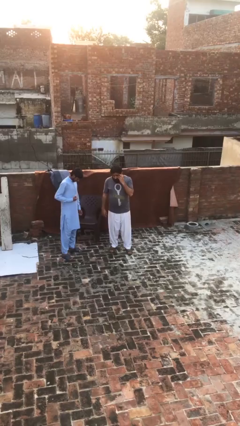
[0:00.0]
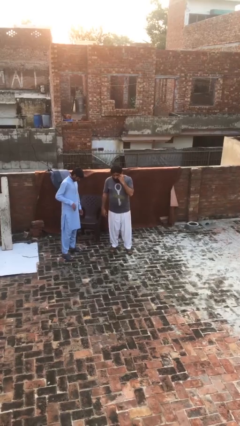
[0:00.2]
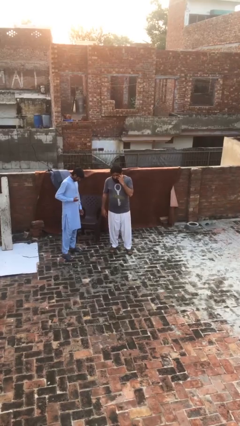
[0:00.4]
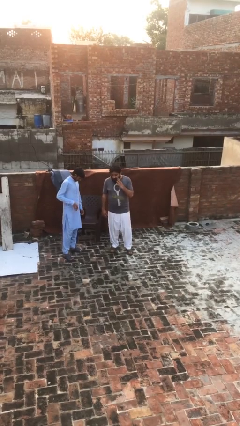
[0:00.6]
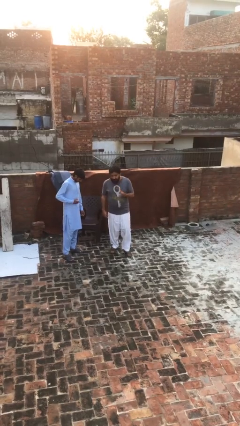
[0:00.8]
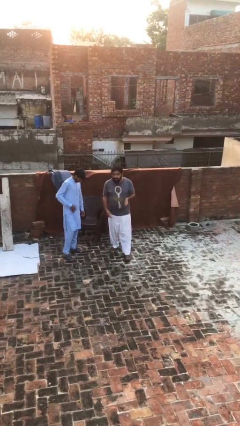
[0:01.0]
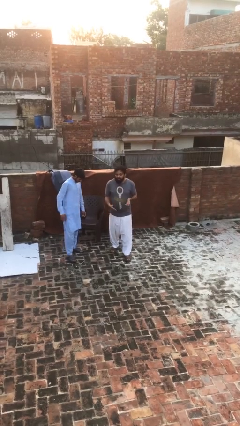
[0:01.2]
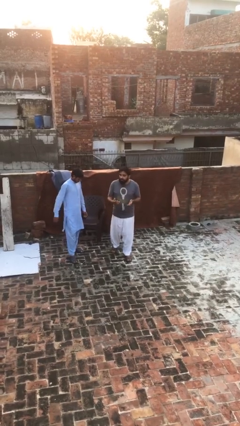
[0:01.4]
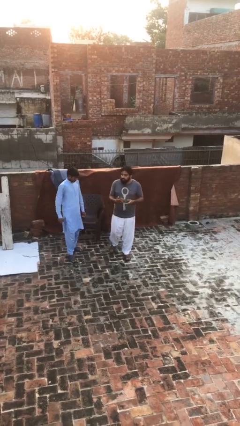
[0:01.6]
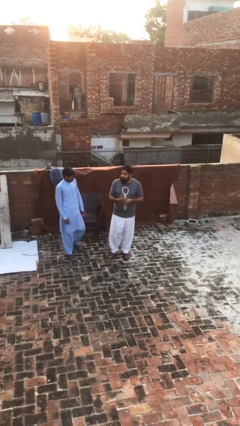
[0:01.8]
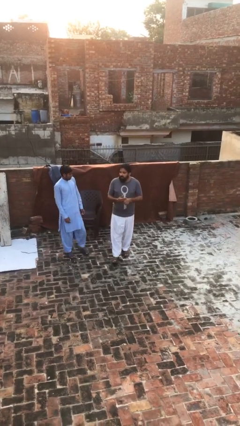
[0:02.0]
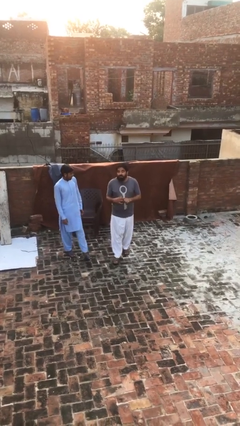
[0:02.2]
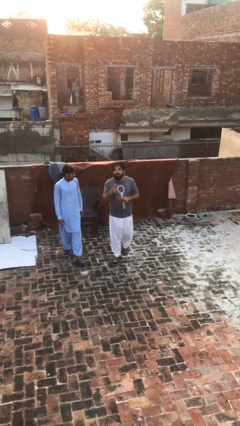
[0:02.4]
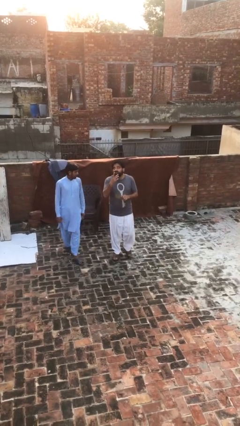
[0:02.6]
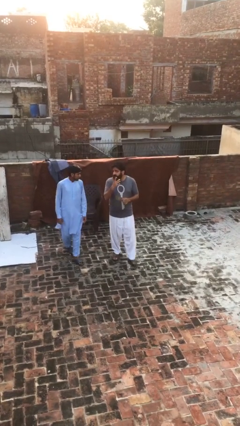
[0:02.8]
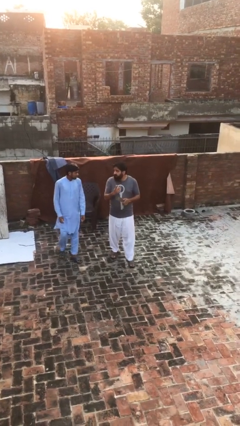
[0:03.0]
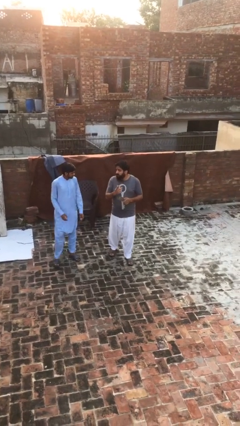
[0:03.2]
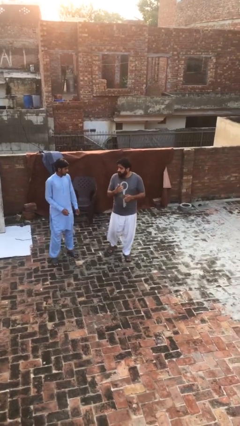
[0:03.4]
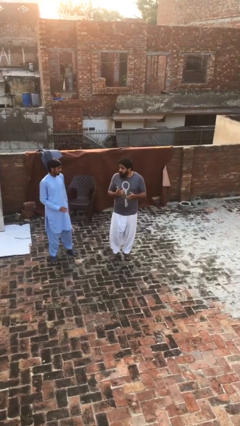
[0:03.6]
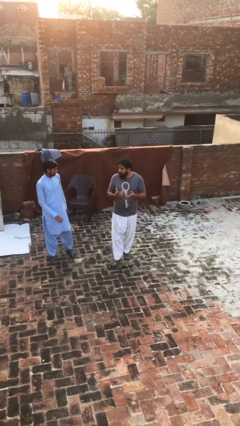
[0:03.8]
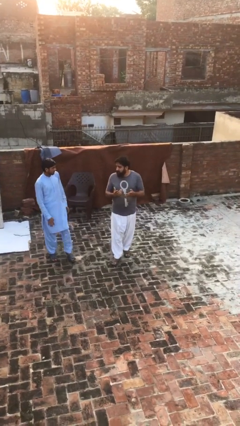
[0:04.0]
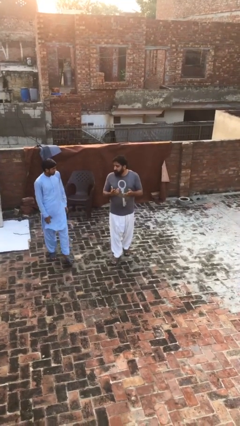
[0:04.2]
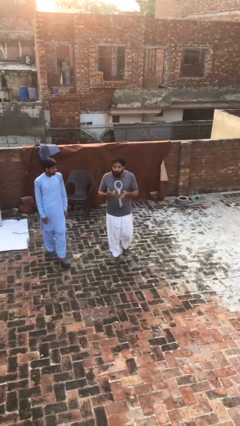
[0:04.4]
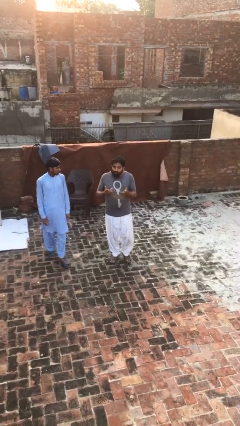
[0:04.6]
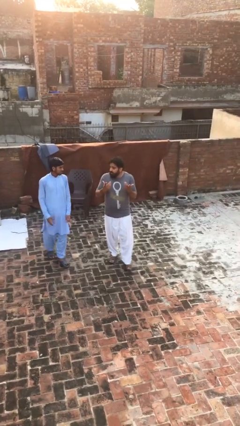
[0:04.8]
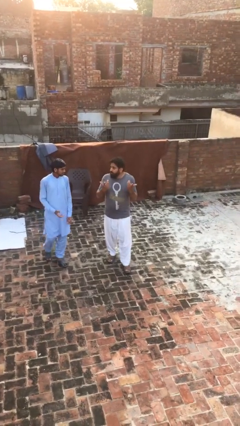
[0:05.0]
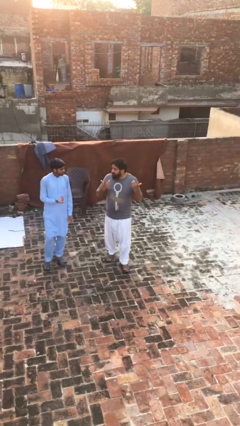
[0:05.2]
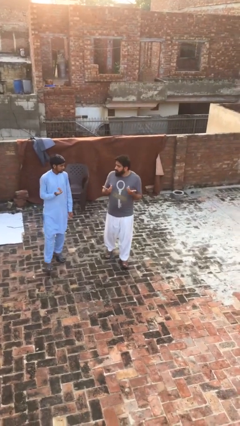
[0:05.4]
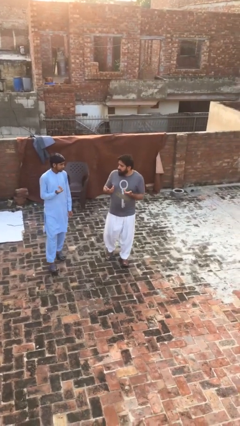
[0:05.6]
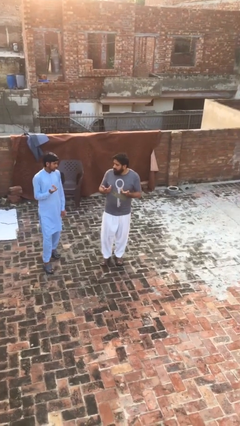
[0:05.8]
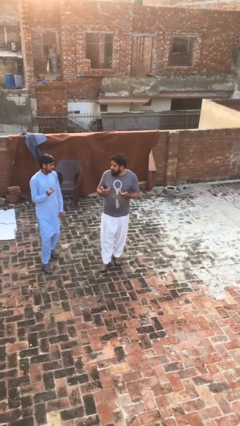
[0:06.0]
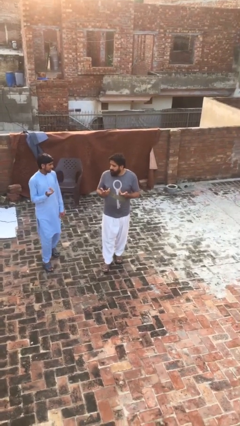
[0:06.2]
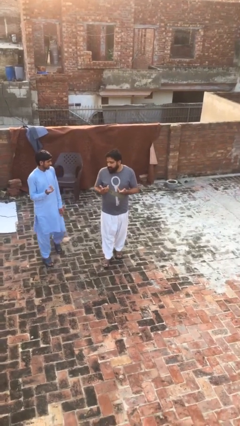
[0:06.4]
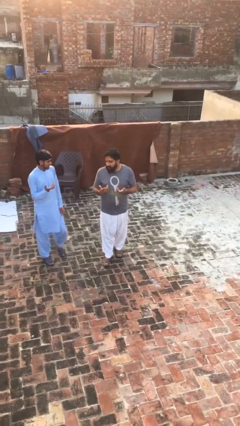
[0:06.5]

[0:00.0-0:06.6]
person talks to person

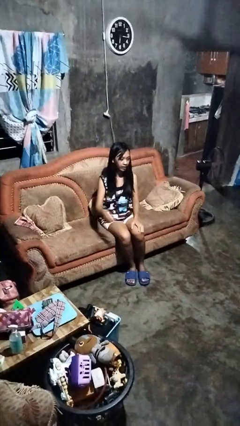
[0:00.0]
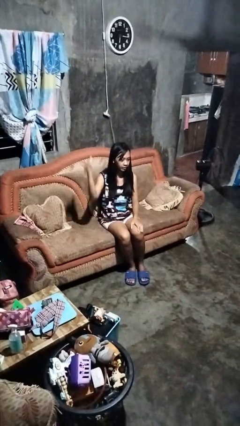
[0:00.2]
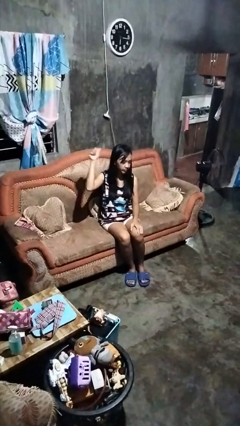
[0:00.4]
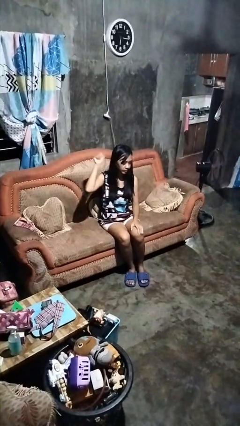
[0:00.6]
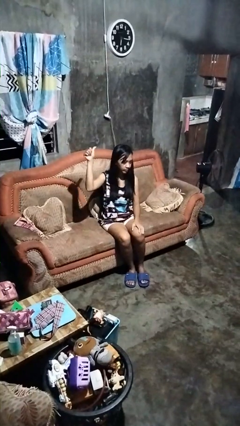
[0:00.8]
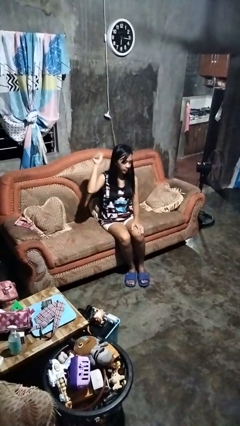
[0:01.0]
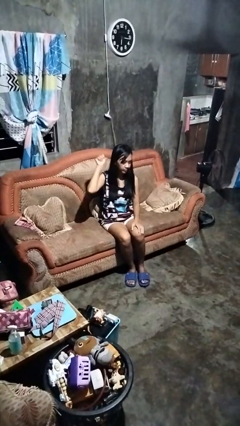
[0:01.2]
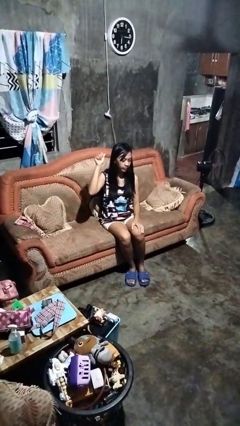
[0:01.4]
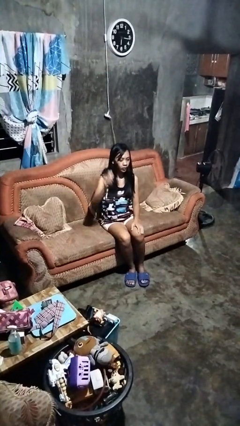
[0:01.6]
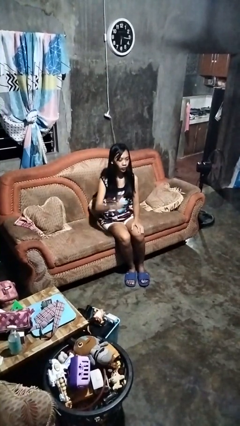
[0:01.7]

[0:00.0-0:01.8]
person gestures behind me

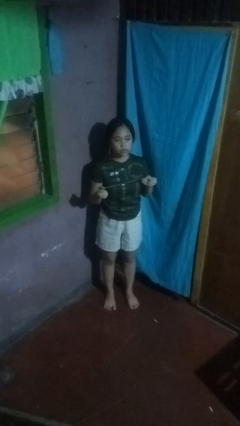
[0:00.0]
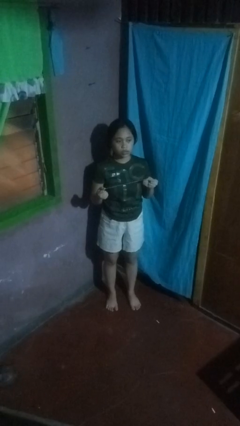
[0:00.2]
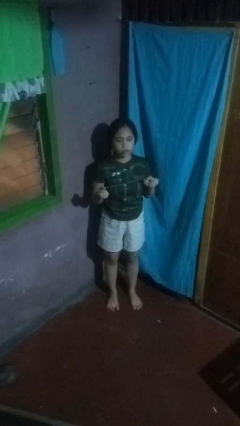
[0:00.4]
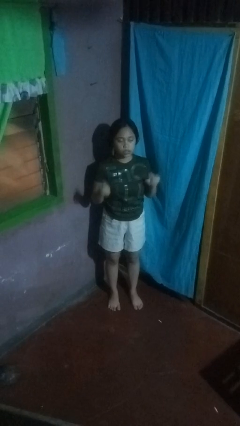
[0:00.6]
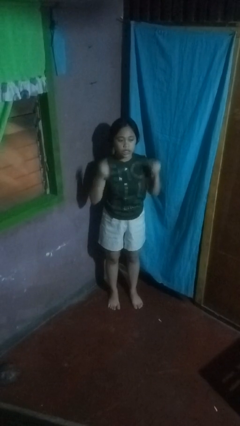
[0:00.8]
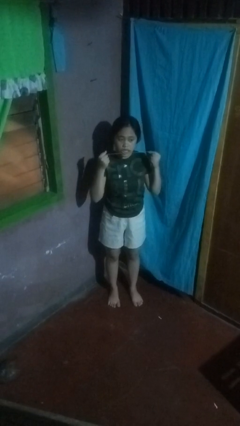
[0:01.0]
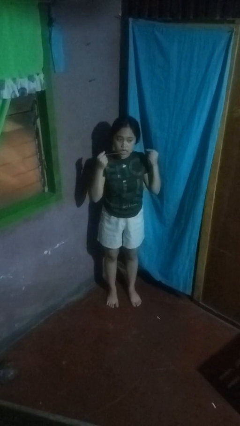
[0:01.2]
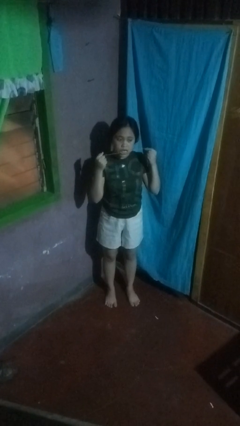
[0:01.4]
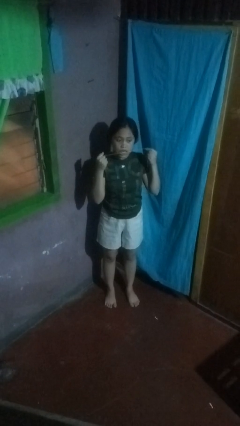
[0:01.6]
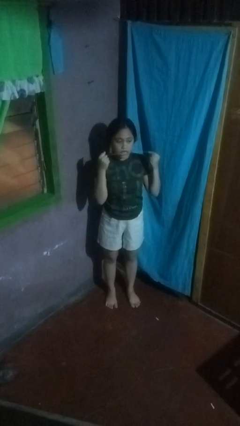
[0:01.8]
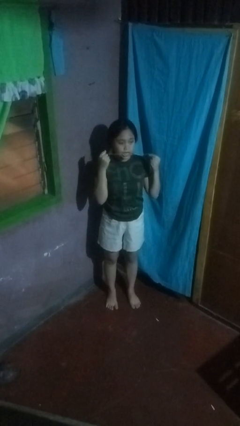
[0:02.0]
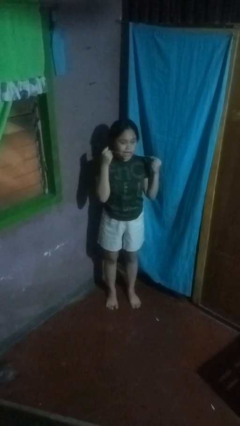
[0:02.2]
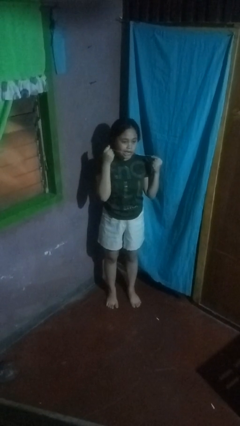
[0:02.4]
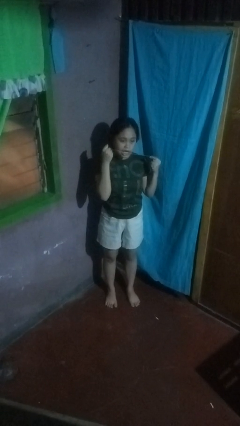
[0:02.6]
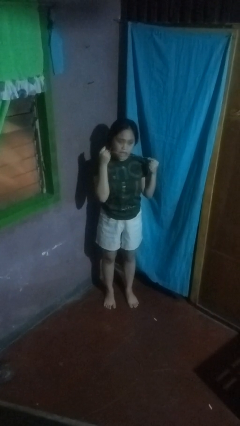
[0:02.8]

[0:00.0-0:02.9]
person flosses

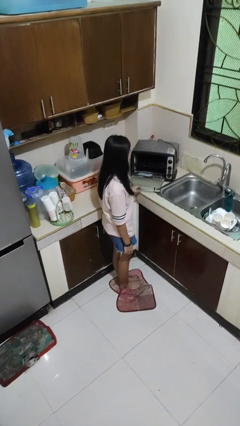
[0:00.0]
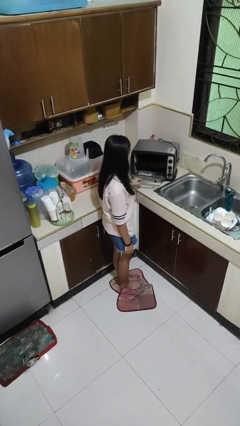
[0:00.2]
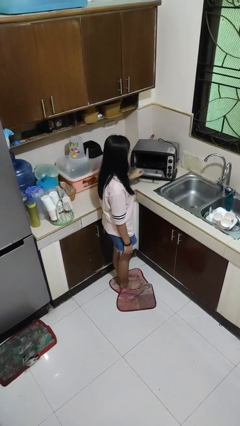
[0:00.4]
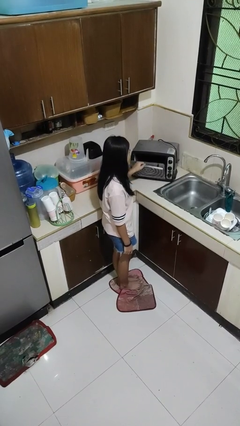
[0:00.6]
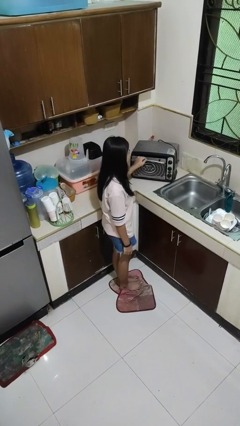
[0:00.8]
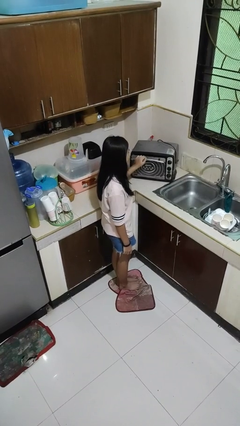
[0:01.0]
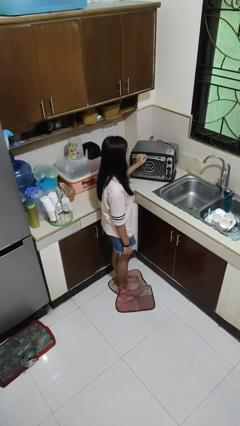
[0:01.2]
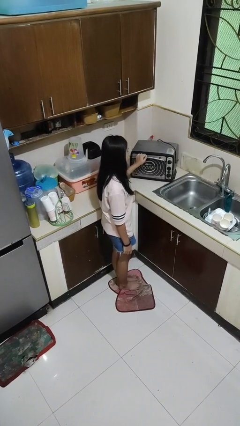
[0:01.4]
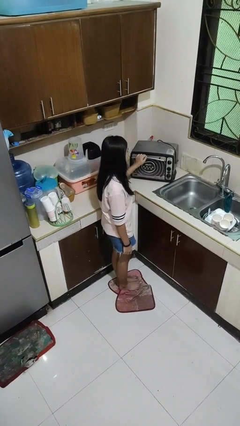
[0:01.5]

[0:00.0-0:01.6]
person closes microwave

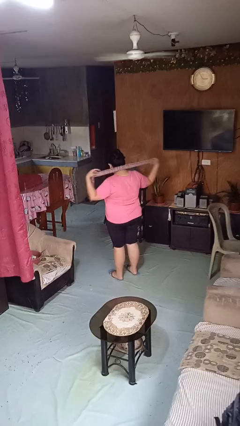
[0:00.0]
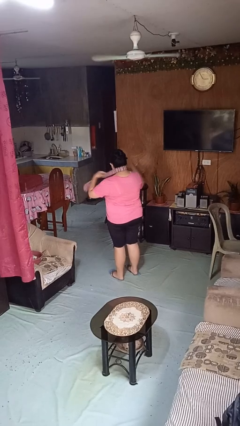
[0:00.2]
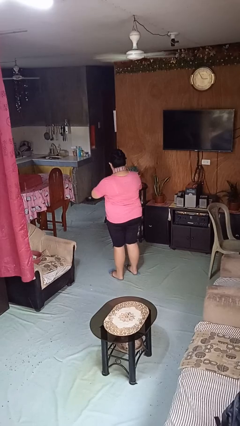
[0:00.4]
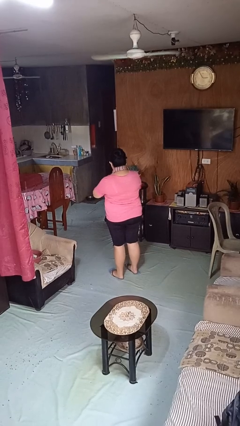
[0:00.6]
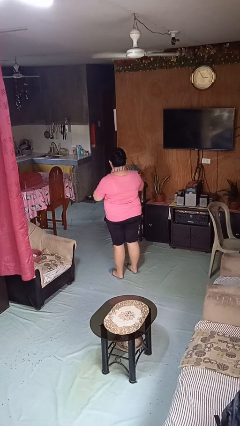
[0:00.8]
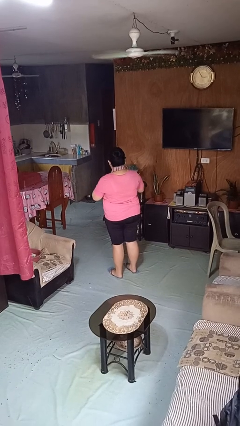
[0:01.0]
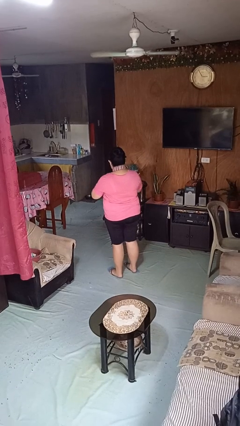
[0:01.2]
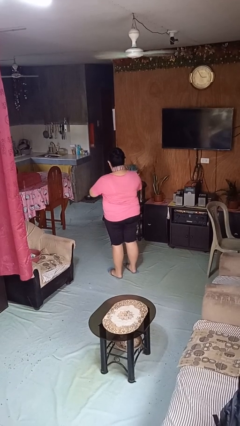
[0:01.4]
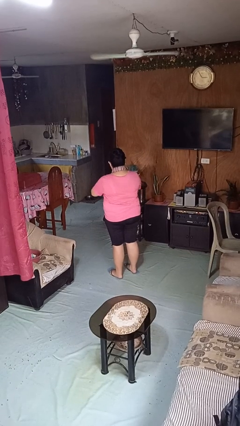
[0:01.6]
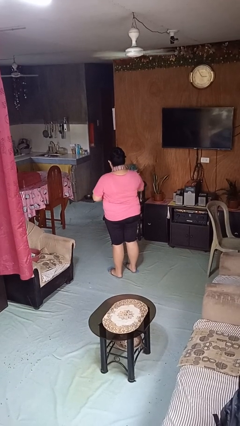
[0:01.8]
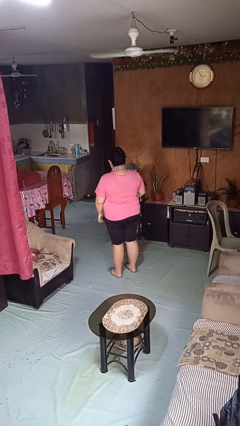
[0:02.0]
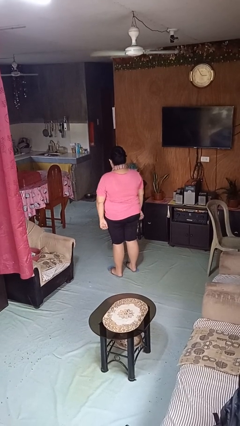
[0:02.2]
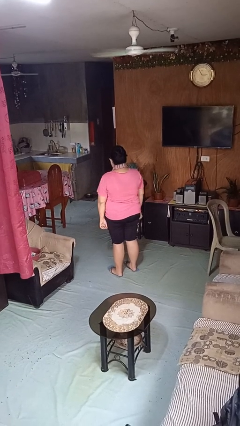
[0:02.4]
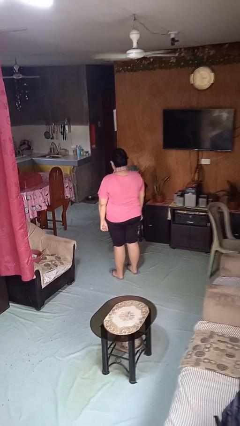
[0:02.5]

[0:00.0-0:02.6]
person puts on necktie

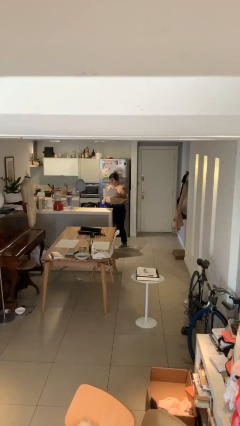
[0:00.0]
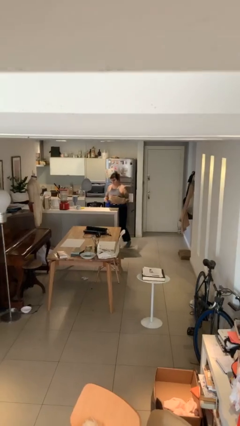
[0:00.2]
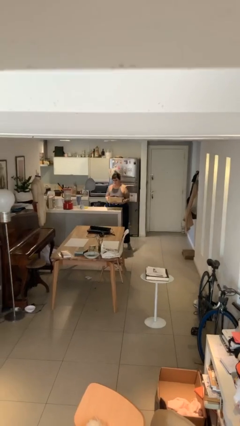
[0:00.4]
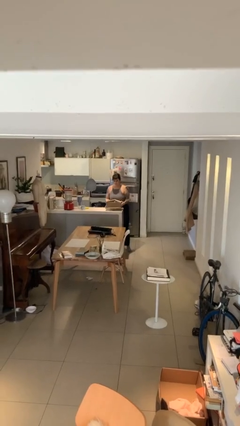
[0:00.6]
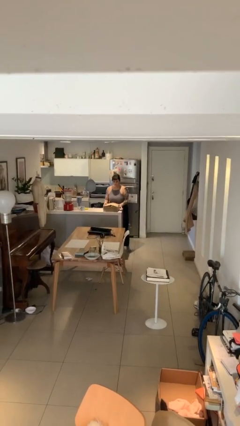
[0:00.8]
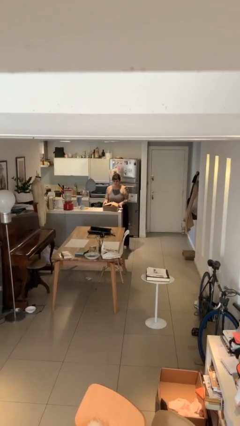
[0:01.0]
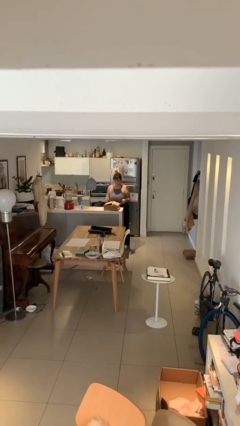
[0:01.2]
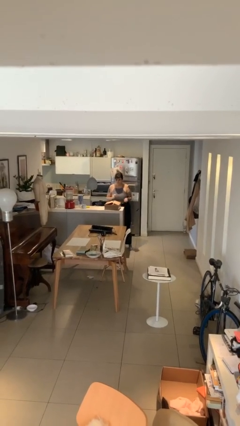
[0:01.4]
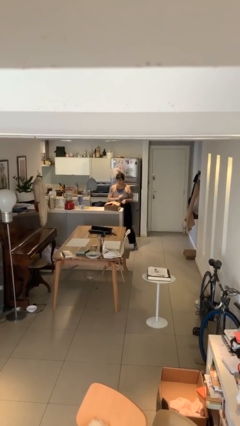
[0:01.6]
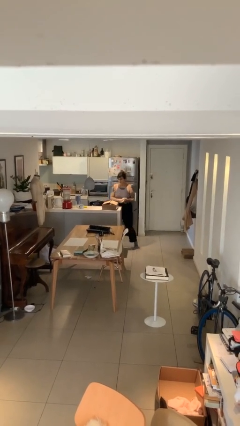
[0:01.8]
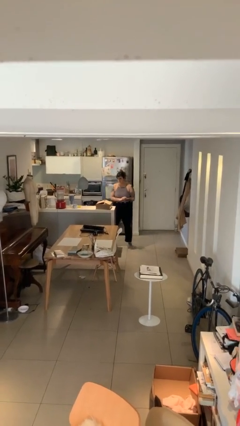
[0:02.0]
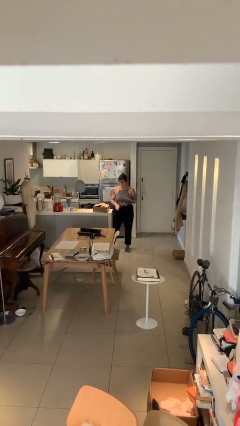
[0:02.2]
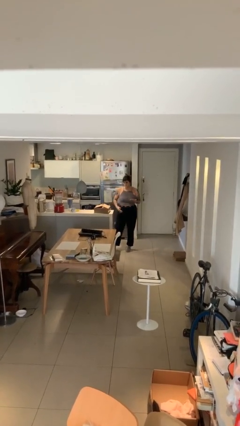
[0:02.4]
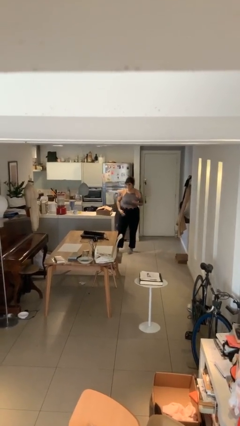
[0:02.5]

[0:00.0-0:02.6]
person puts down object on table
